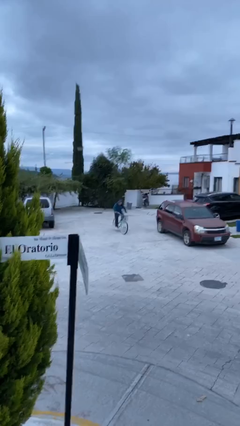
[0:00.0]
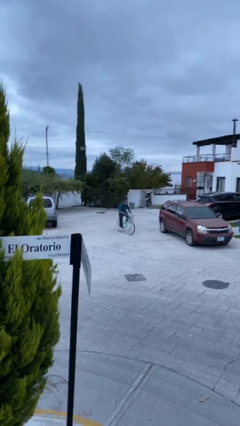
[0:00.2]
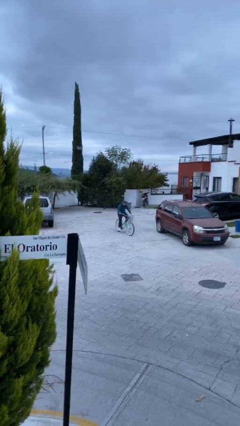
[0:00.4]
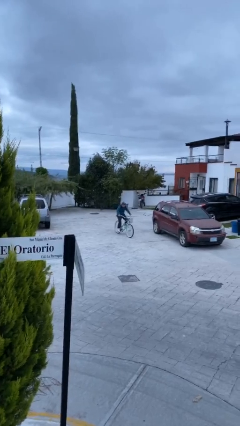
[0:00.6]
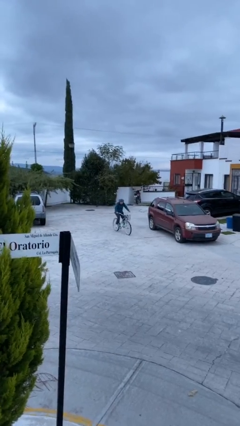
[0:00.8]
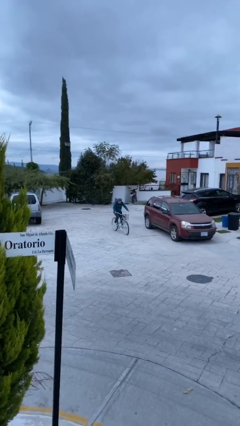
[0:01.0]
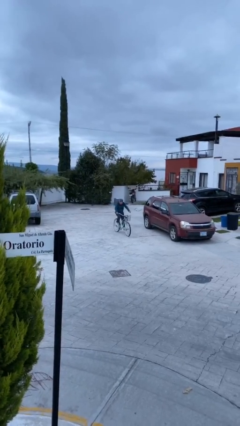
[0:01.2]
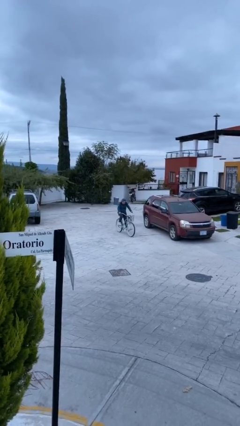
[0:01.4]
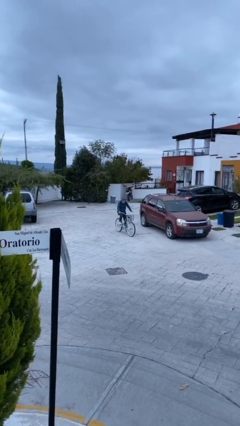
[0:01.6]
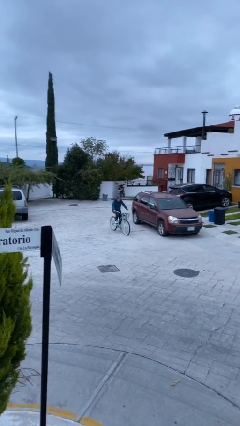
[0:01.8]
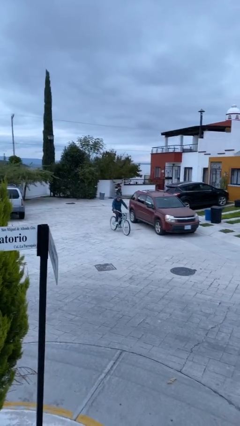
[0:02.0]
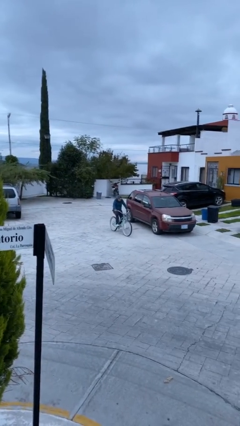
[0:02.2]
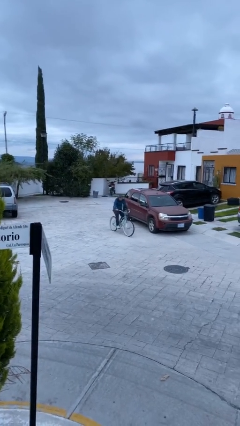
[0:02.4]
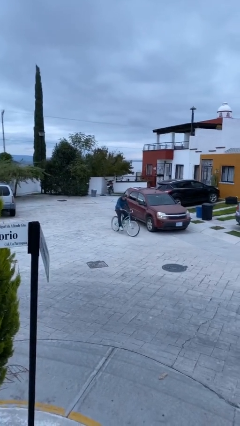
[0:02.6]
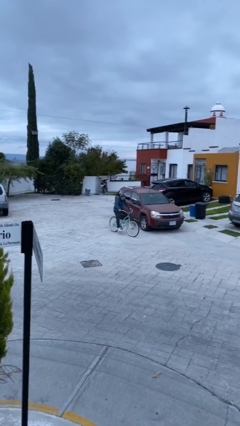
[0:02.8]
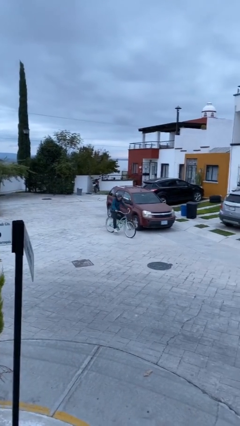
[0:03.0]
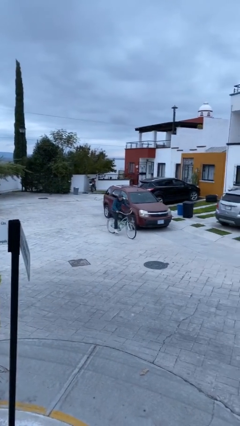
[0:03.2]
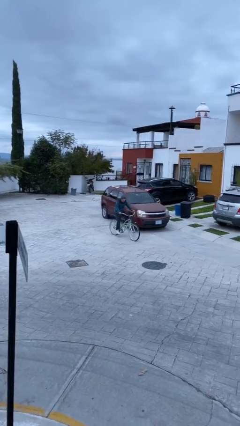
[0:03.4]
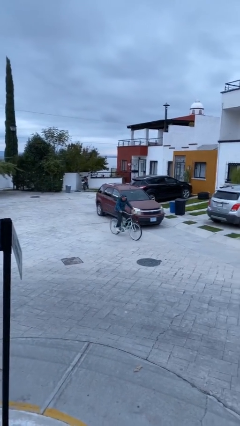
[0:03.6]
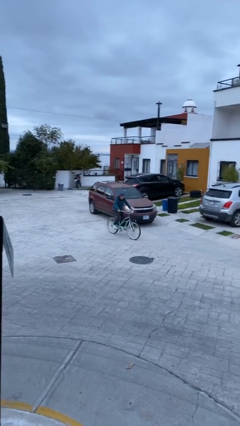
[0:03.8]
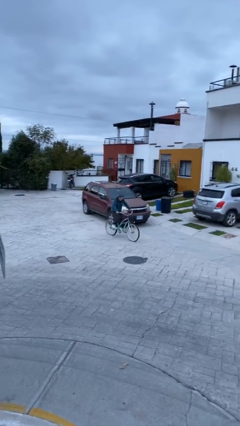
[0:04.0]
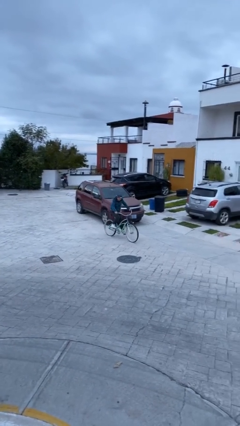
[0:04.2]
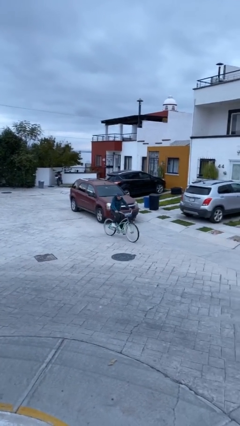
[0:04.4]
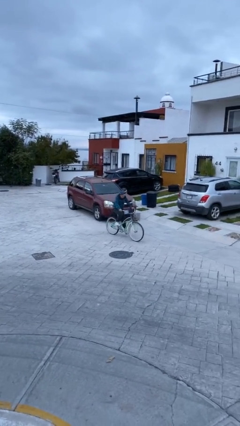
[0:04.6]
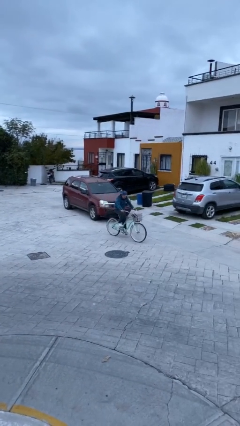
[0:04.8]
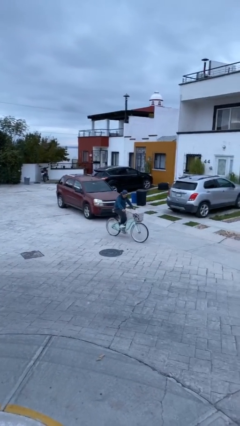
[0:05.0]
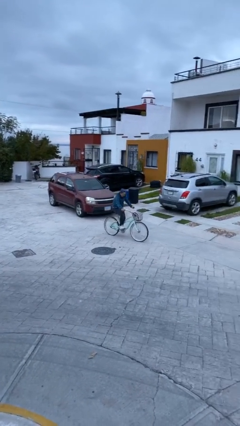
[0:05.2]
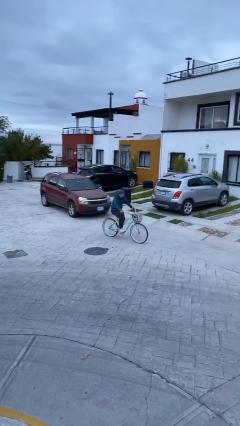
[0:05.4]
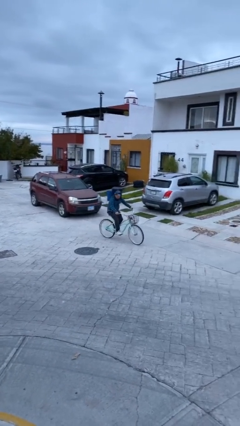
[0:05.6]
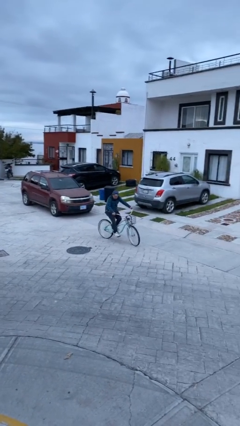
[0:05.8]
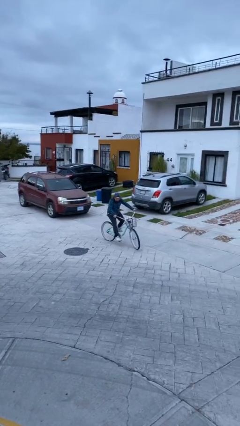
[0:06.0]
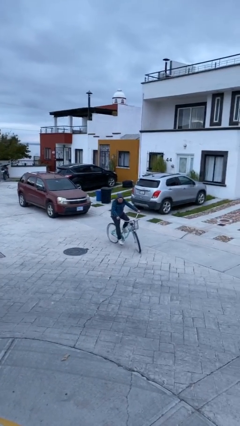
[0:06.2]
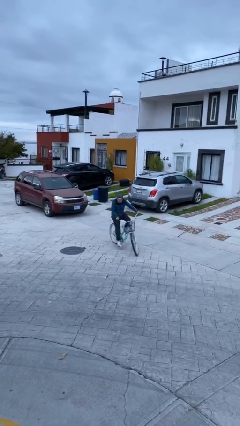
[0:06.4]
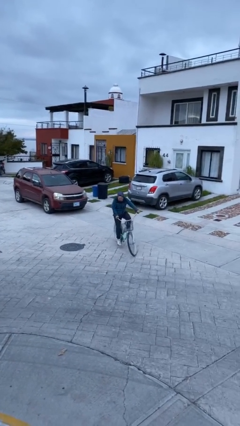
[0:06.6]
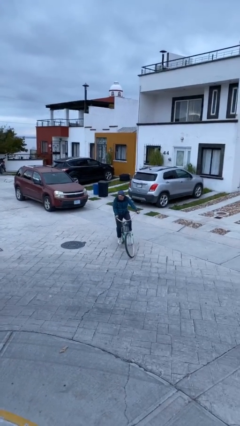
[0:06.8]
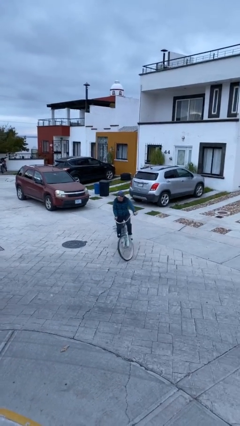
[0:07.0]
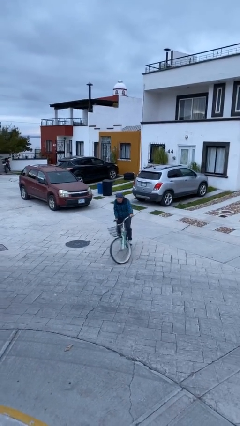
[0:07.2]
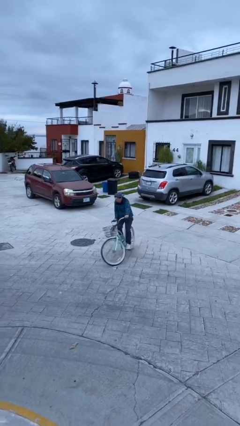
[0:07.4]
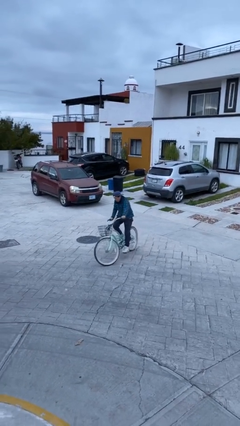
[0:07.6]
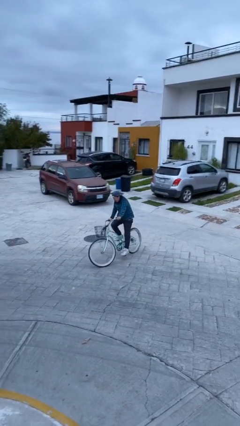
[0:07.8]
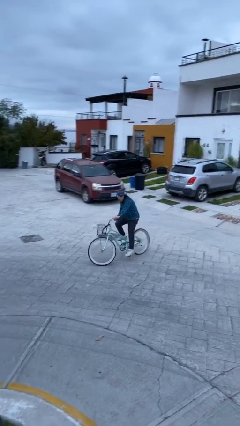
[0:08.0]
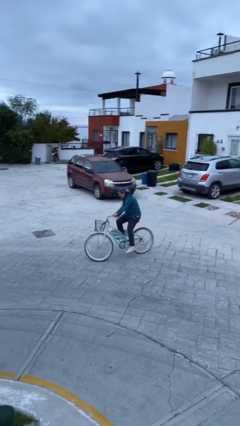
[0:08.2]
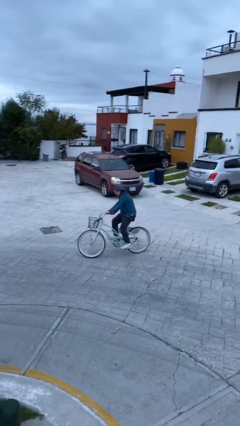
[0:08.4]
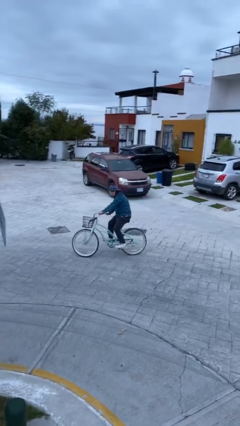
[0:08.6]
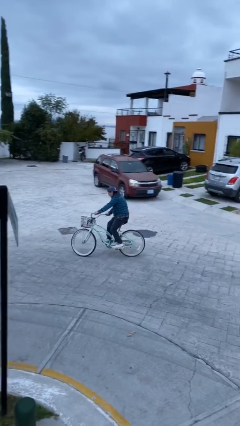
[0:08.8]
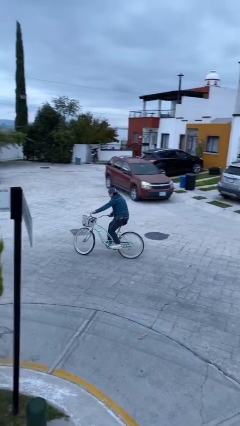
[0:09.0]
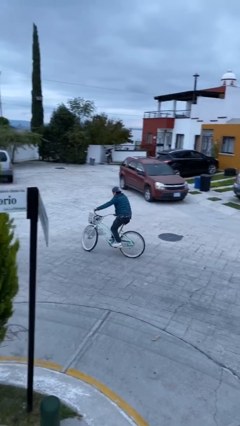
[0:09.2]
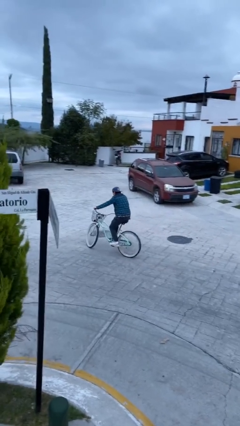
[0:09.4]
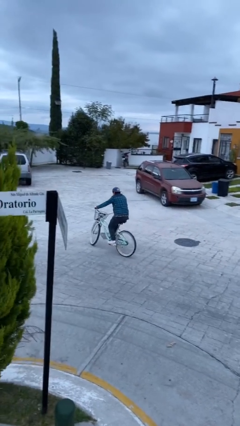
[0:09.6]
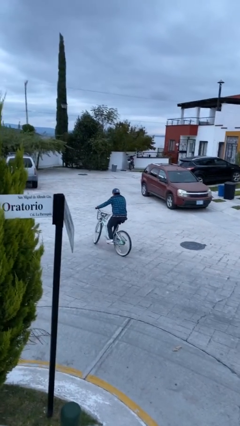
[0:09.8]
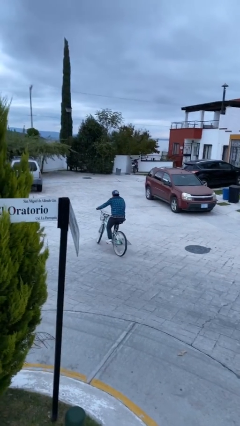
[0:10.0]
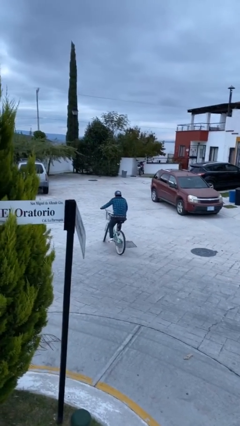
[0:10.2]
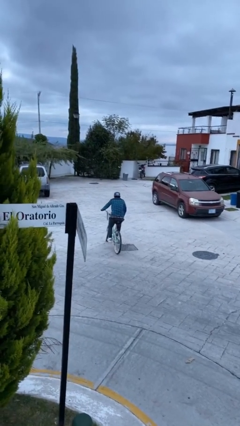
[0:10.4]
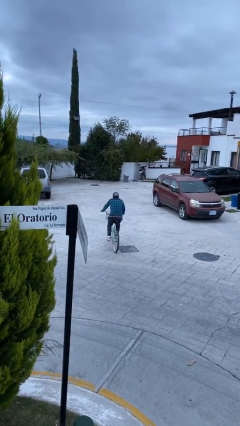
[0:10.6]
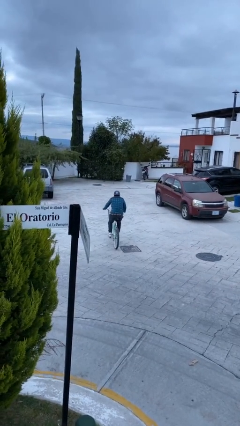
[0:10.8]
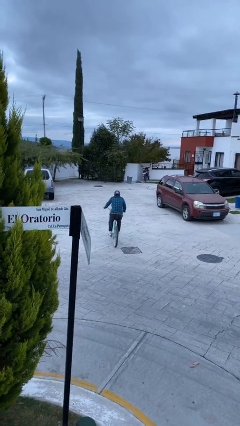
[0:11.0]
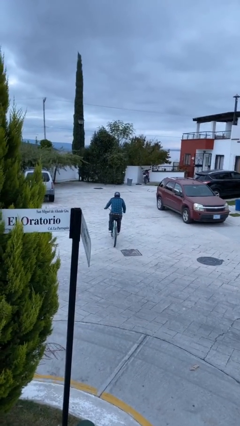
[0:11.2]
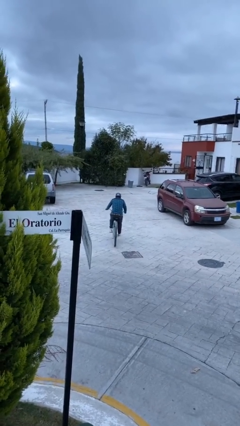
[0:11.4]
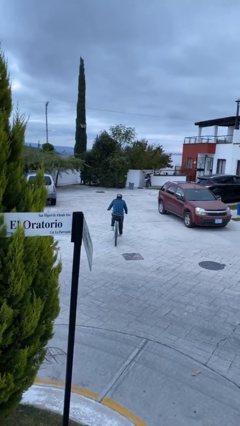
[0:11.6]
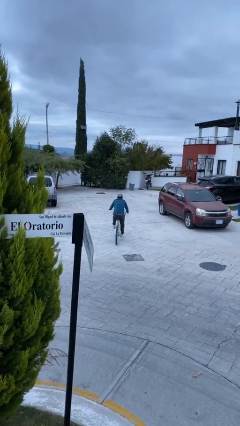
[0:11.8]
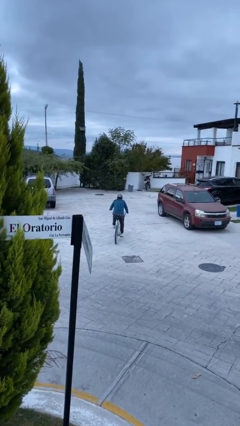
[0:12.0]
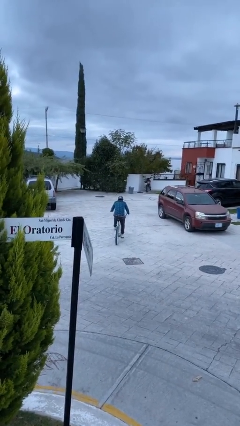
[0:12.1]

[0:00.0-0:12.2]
person rides bicycle

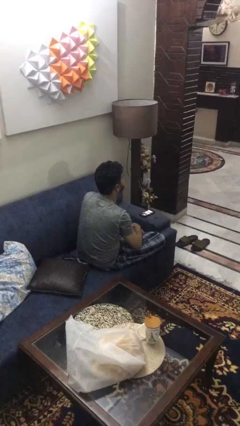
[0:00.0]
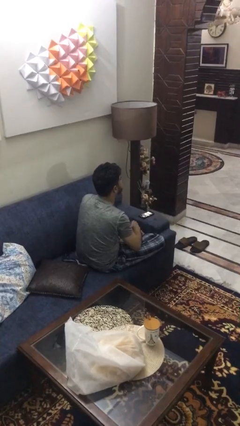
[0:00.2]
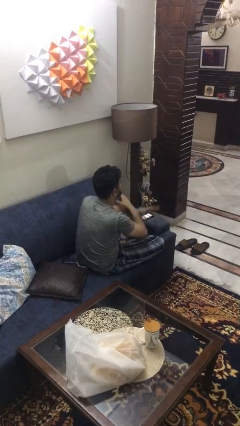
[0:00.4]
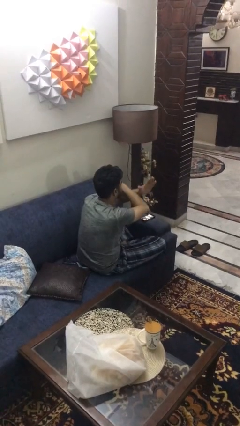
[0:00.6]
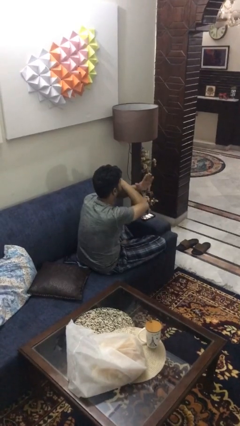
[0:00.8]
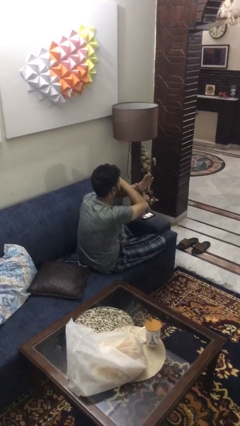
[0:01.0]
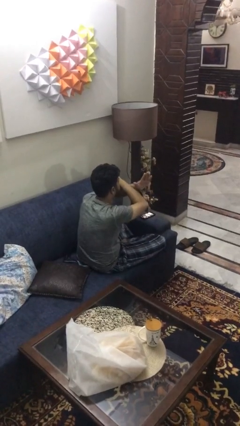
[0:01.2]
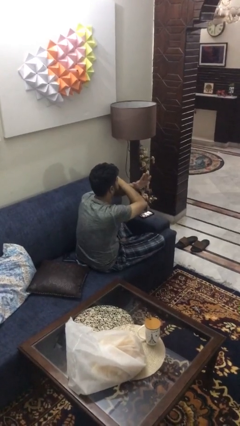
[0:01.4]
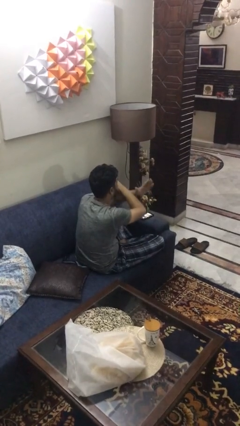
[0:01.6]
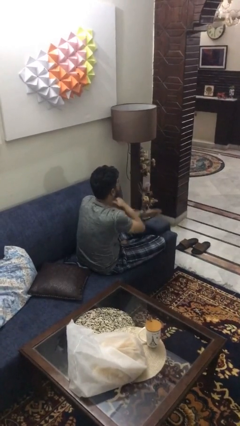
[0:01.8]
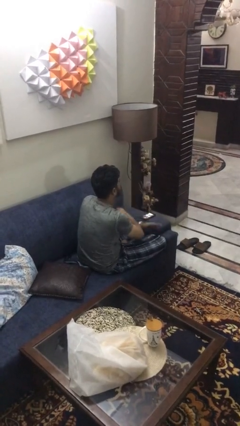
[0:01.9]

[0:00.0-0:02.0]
person gestures arms x

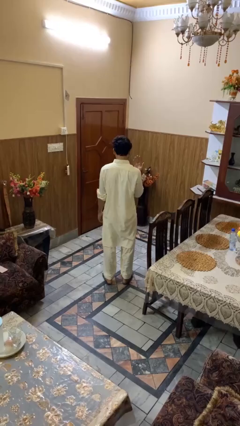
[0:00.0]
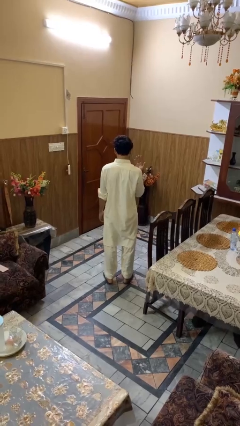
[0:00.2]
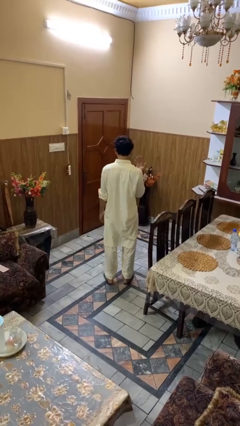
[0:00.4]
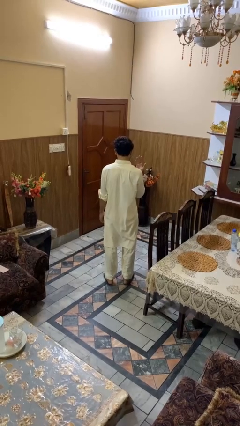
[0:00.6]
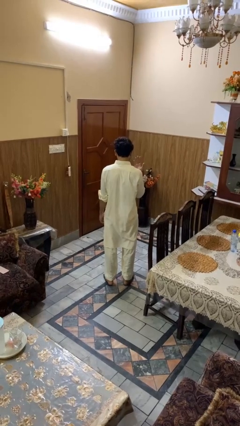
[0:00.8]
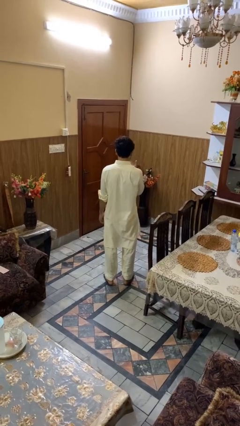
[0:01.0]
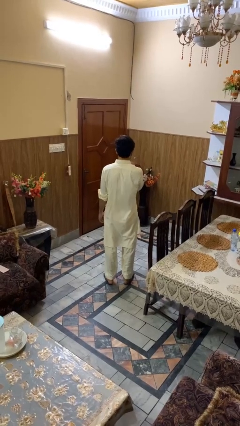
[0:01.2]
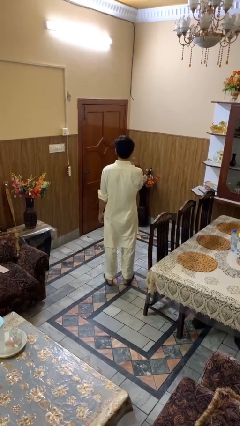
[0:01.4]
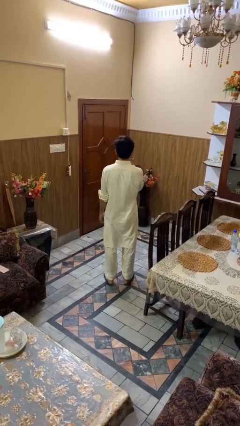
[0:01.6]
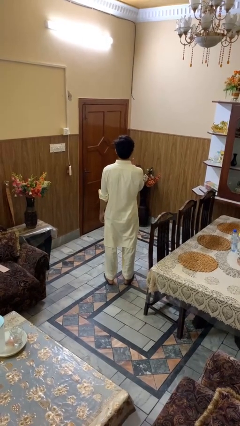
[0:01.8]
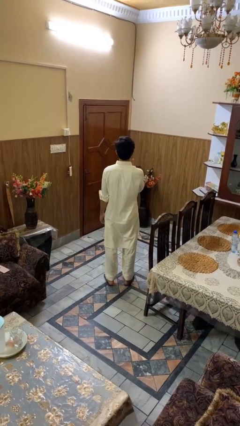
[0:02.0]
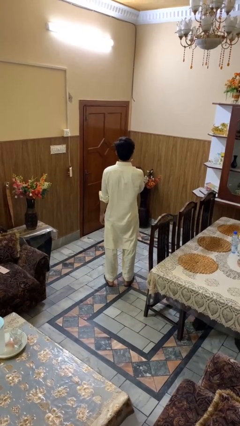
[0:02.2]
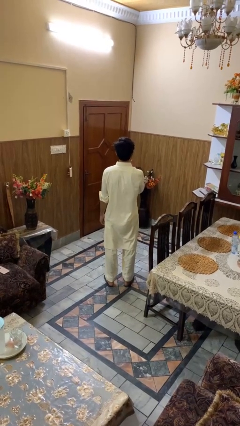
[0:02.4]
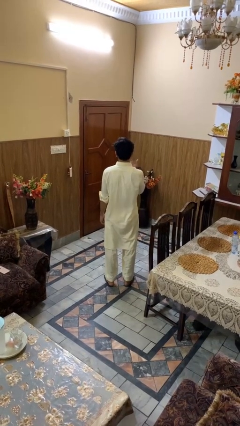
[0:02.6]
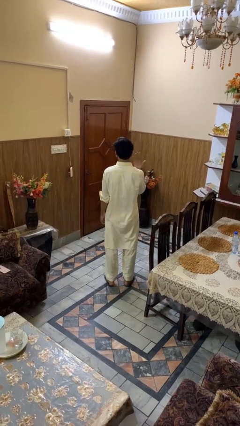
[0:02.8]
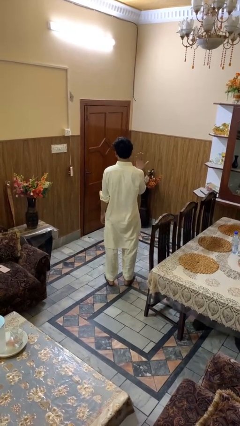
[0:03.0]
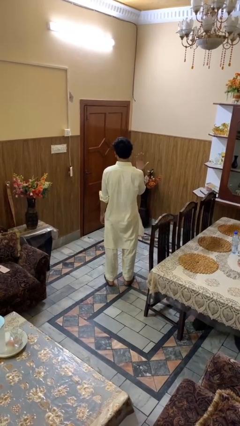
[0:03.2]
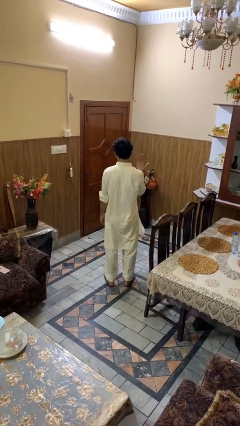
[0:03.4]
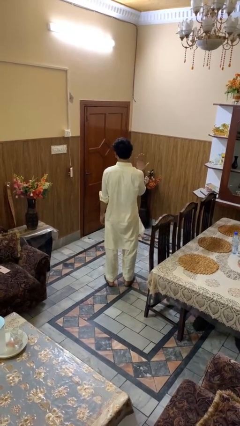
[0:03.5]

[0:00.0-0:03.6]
person licks fingers
